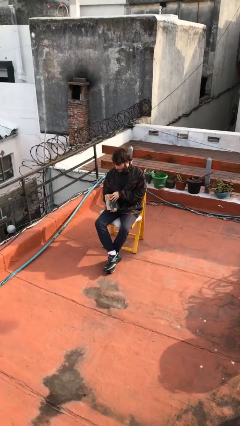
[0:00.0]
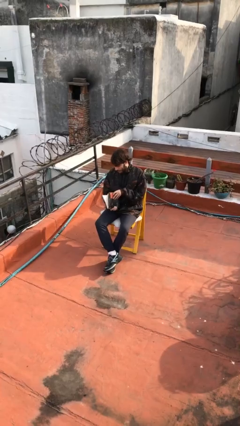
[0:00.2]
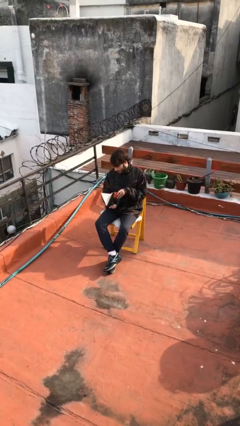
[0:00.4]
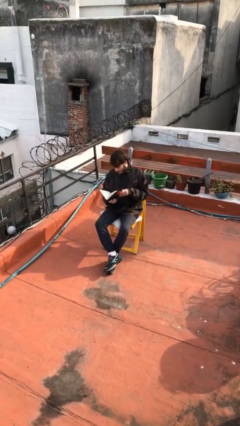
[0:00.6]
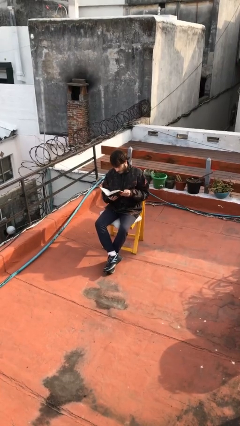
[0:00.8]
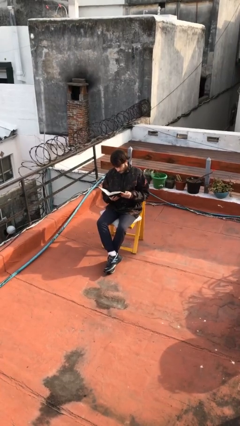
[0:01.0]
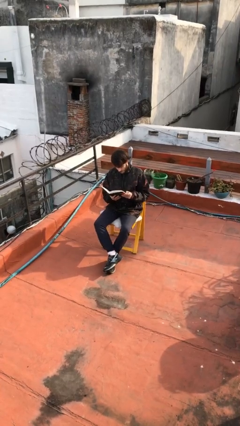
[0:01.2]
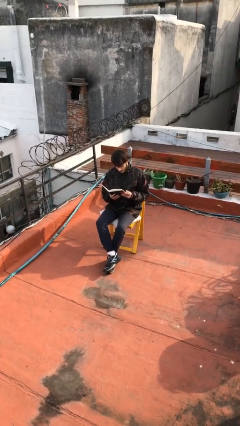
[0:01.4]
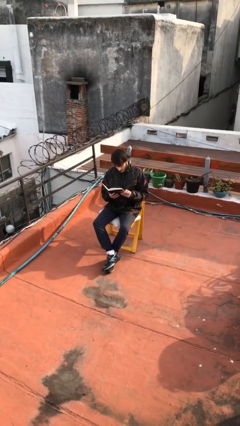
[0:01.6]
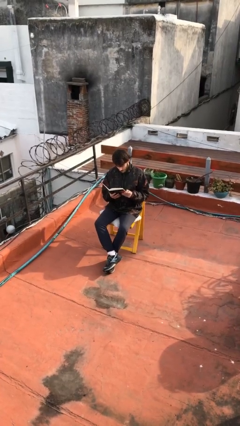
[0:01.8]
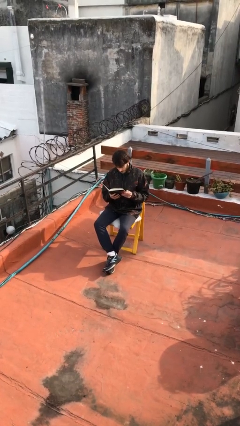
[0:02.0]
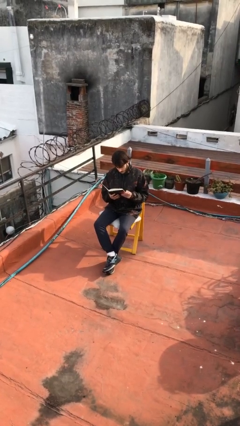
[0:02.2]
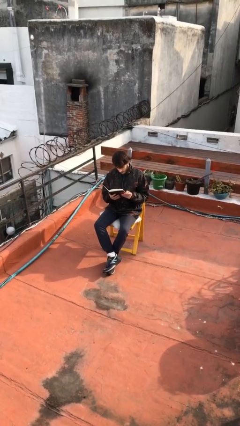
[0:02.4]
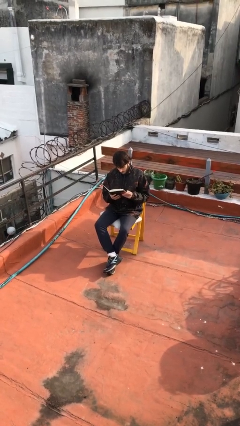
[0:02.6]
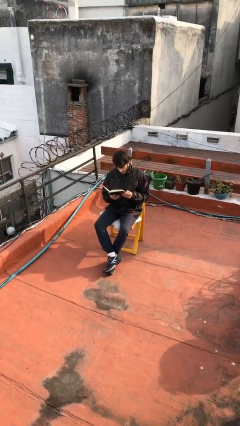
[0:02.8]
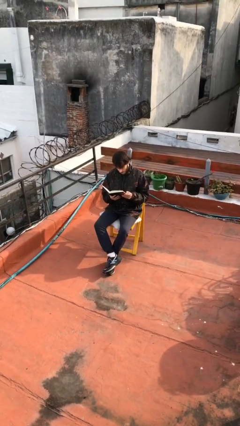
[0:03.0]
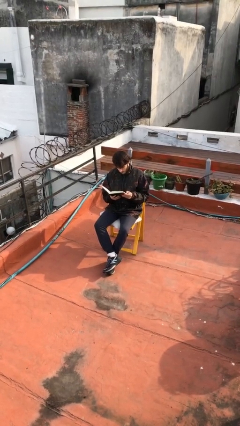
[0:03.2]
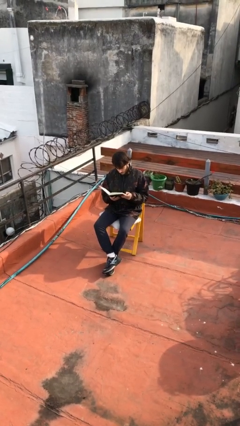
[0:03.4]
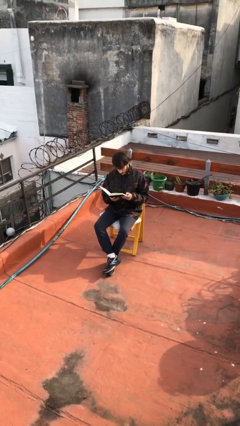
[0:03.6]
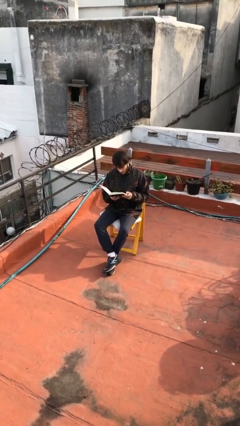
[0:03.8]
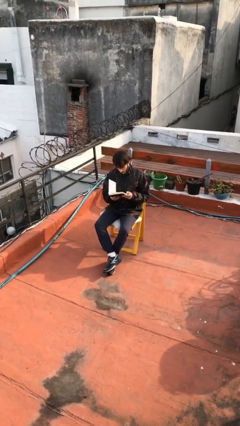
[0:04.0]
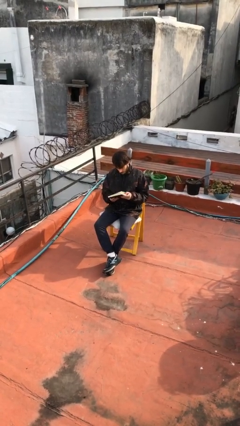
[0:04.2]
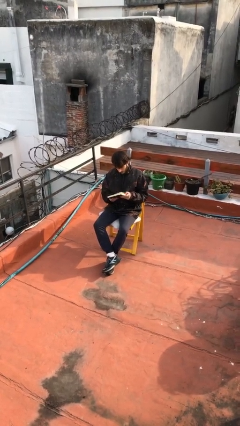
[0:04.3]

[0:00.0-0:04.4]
person reads book

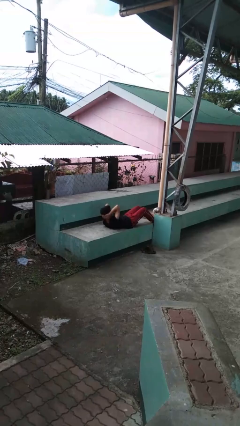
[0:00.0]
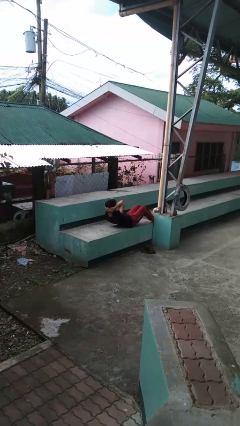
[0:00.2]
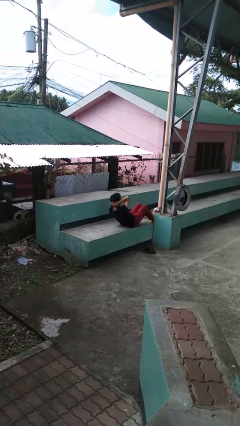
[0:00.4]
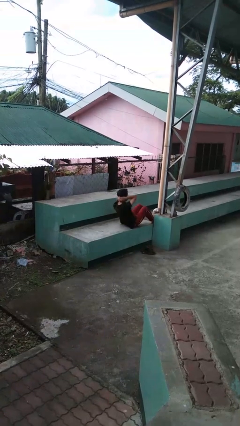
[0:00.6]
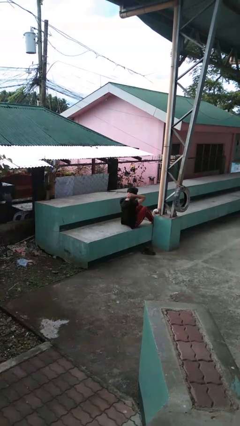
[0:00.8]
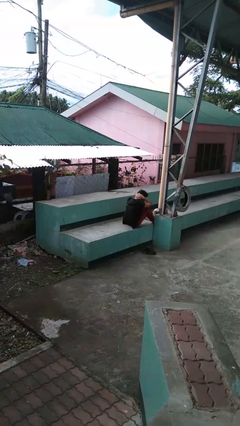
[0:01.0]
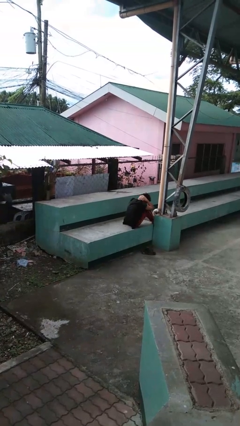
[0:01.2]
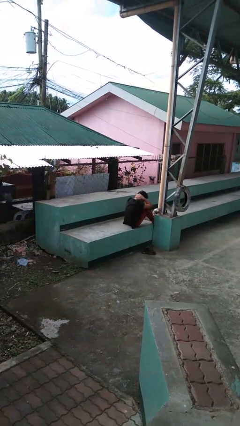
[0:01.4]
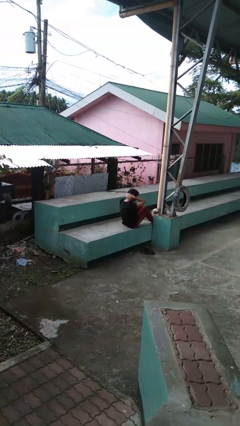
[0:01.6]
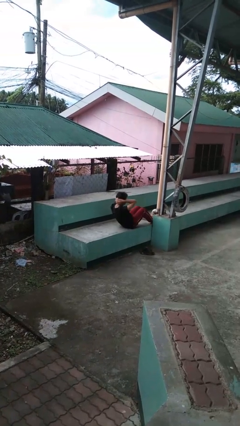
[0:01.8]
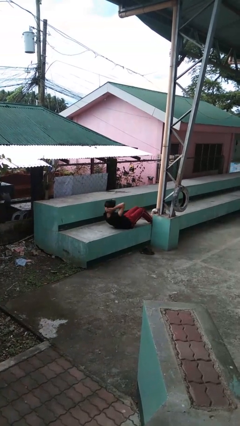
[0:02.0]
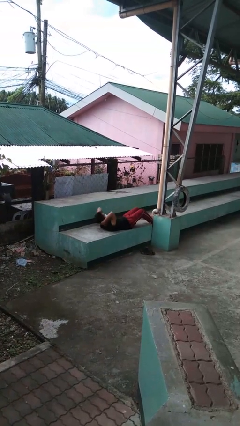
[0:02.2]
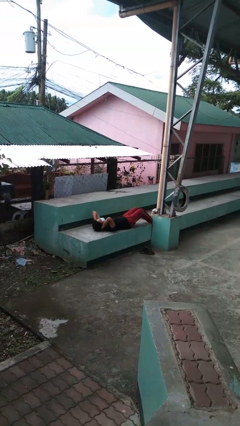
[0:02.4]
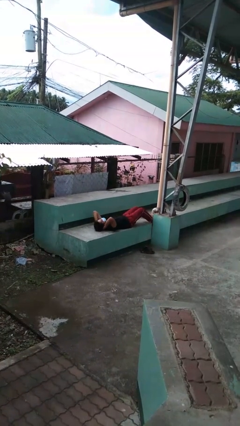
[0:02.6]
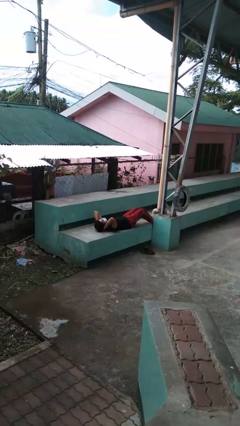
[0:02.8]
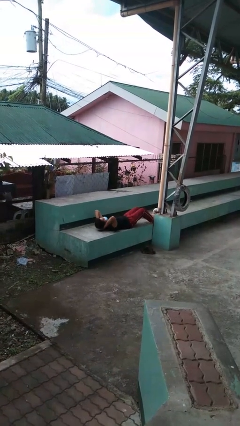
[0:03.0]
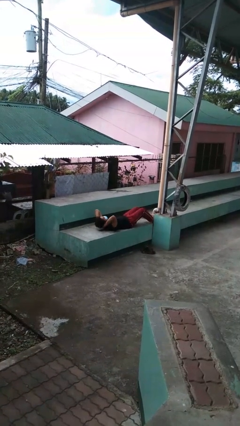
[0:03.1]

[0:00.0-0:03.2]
person exercises with situp

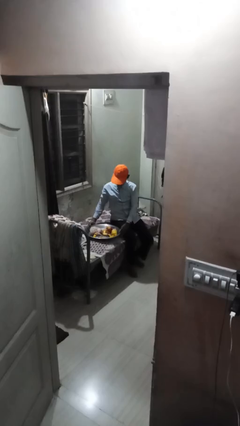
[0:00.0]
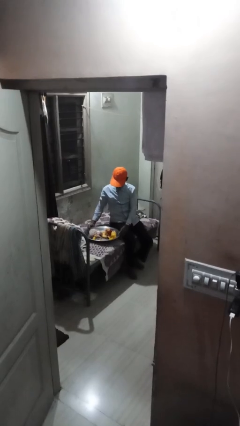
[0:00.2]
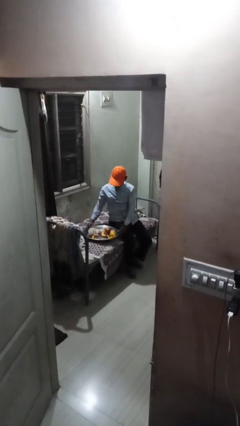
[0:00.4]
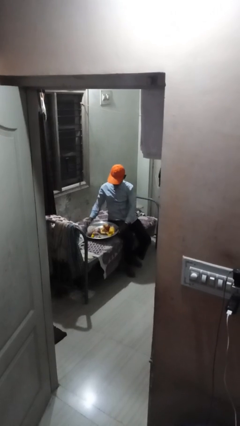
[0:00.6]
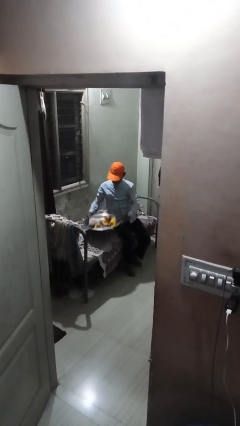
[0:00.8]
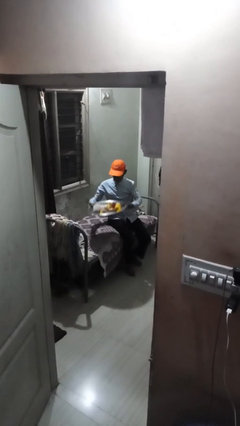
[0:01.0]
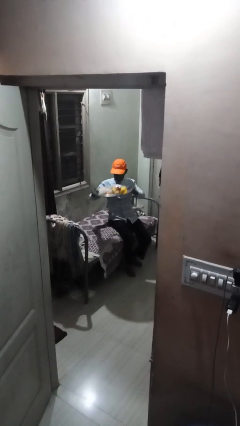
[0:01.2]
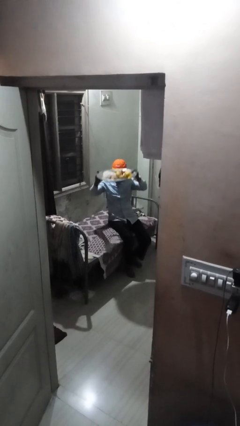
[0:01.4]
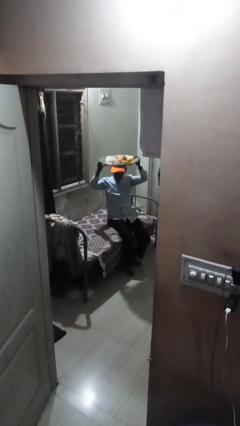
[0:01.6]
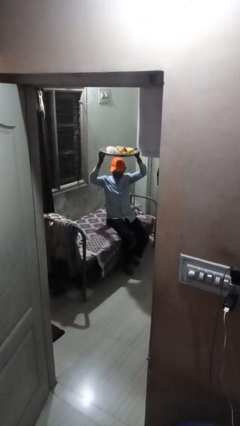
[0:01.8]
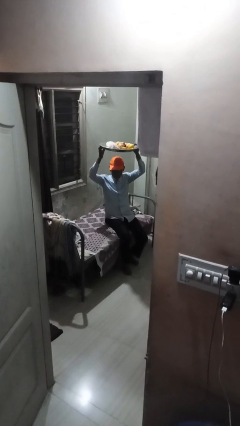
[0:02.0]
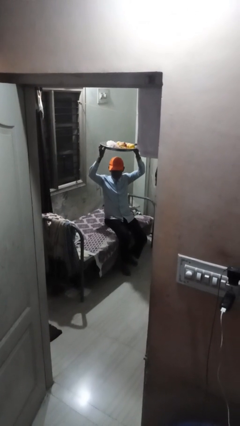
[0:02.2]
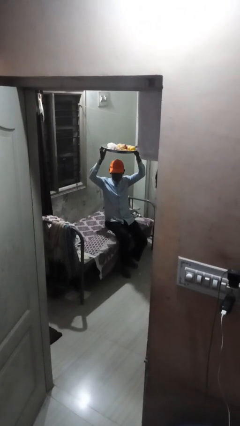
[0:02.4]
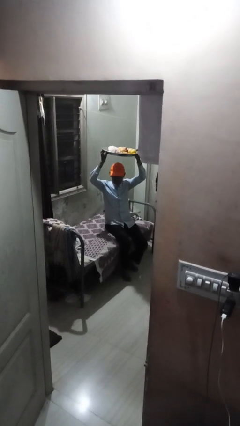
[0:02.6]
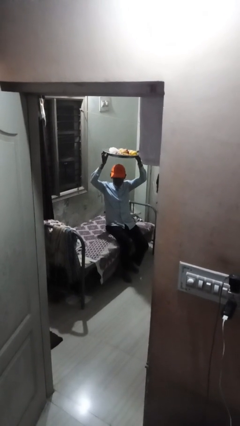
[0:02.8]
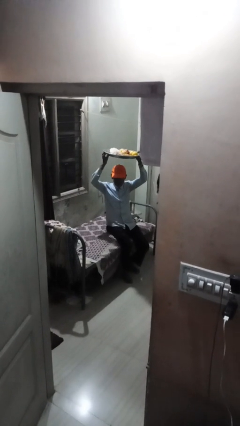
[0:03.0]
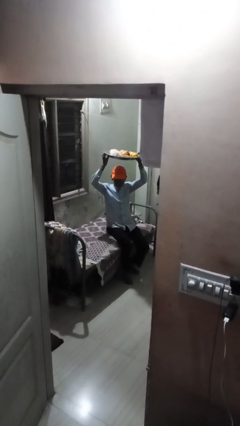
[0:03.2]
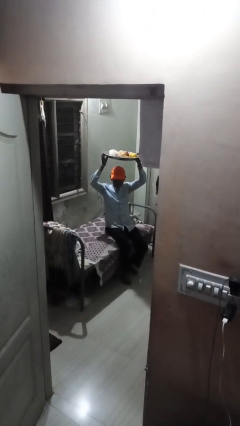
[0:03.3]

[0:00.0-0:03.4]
person holds object above head

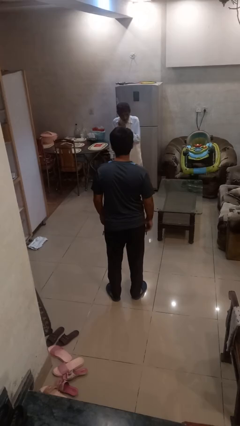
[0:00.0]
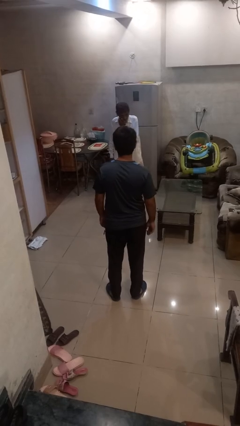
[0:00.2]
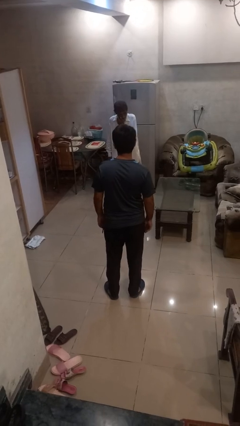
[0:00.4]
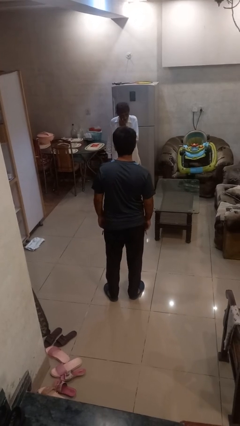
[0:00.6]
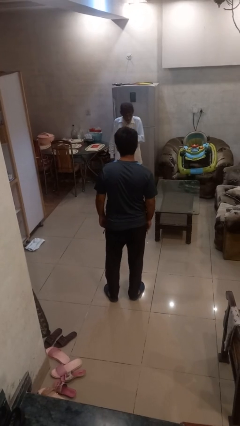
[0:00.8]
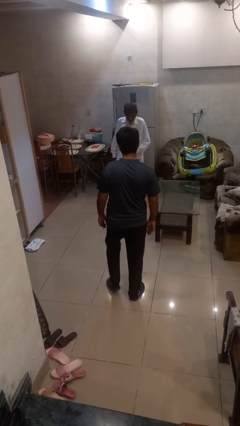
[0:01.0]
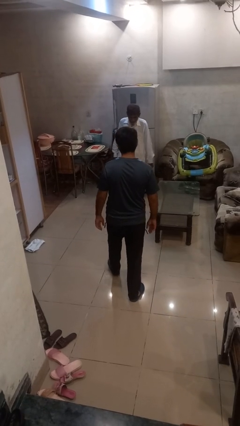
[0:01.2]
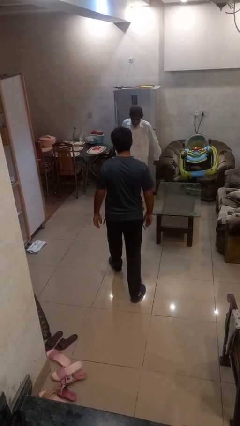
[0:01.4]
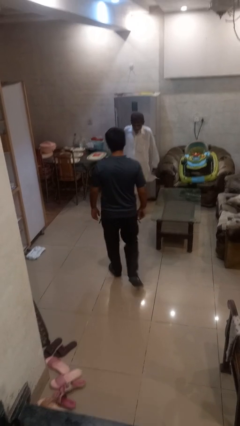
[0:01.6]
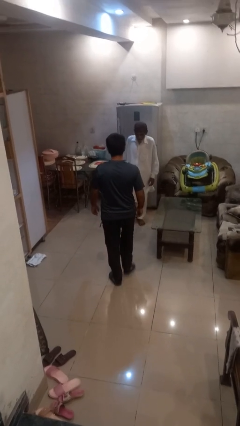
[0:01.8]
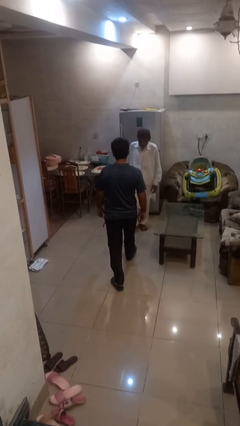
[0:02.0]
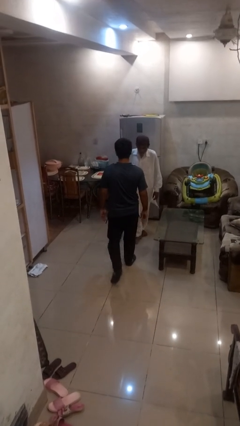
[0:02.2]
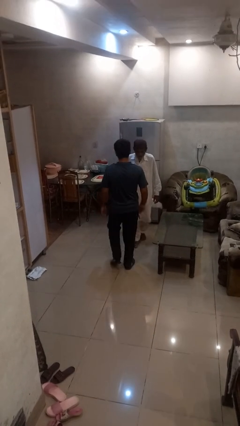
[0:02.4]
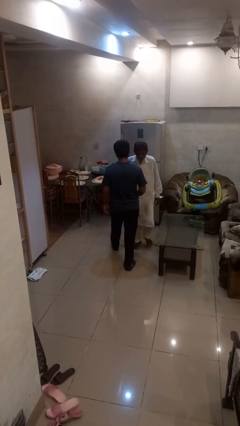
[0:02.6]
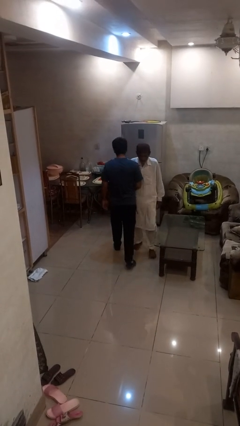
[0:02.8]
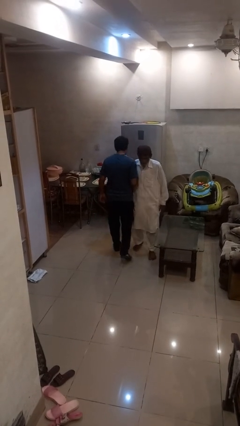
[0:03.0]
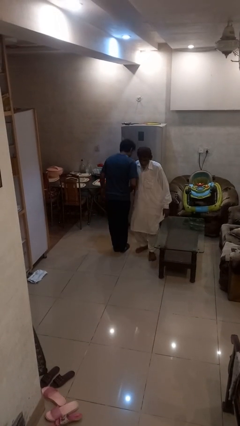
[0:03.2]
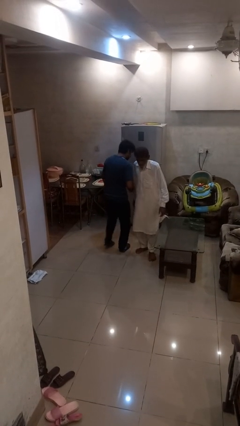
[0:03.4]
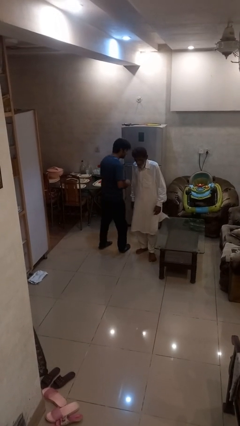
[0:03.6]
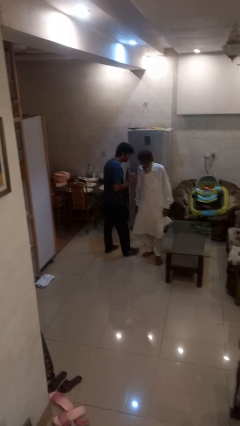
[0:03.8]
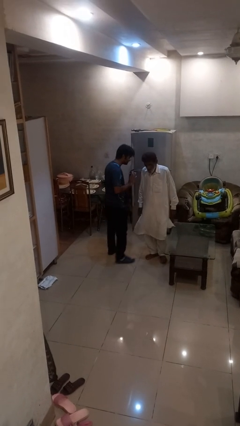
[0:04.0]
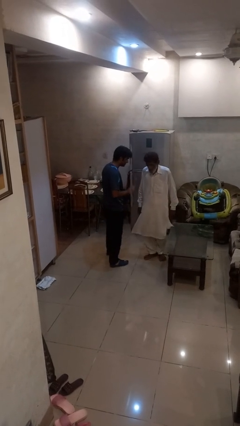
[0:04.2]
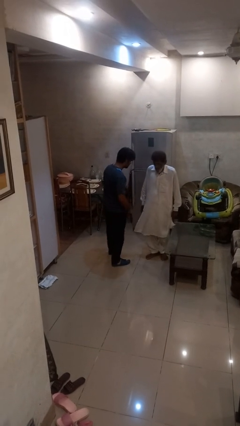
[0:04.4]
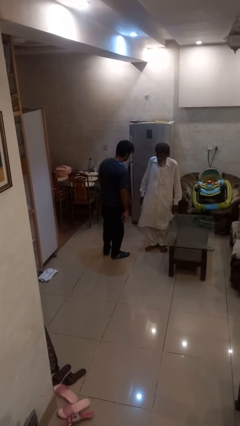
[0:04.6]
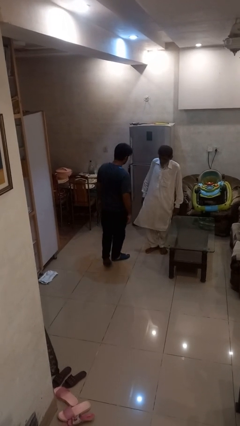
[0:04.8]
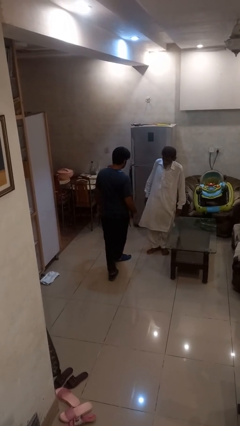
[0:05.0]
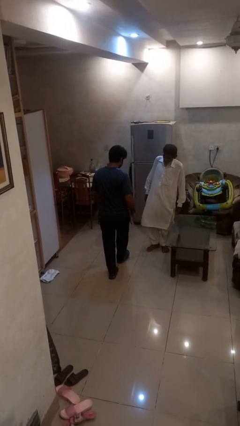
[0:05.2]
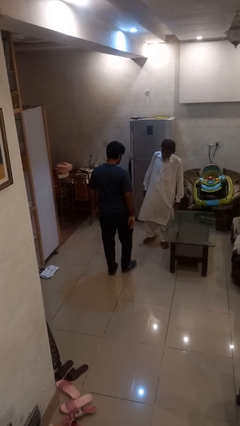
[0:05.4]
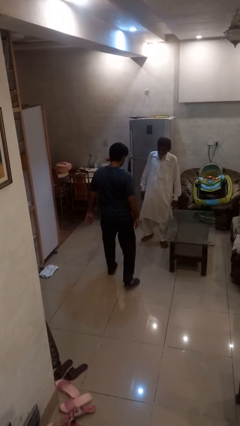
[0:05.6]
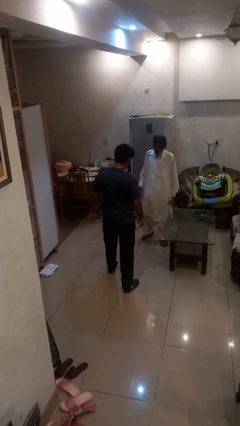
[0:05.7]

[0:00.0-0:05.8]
person bumps into person

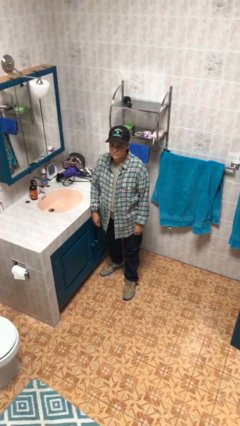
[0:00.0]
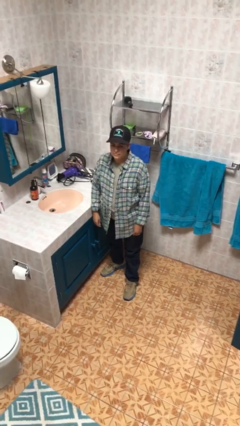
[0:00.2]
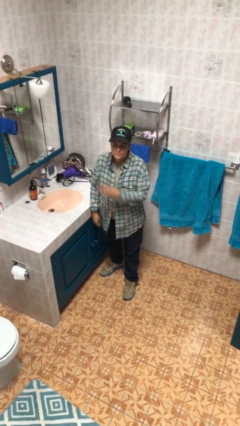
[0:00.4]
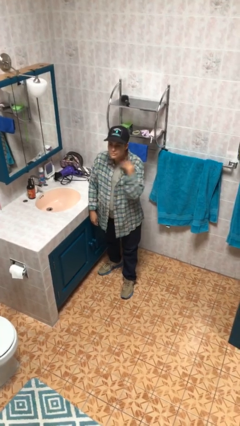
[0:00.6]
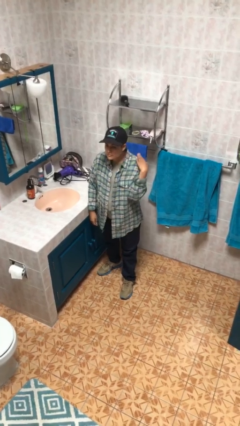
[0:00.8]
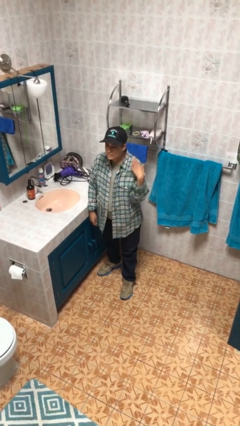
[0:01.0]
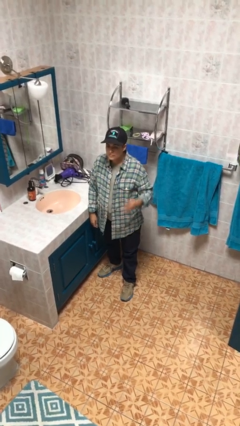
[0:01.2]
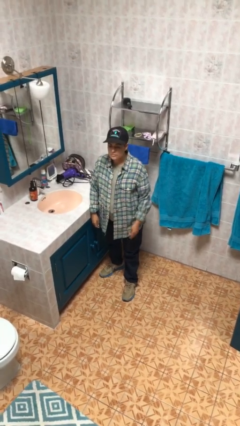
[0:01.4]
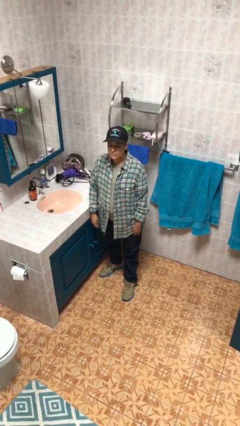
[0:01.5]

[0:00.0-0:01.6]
person gestures cut
